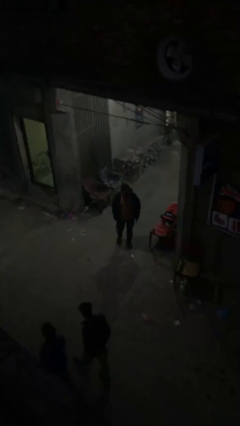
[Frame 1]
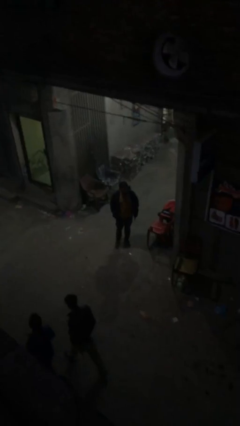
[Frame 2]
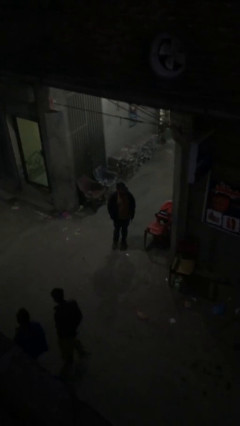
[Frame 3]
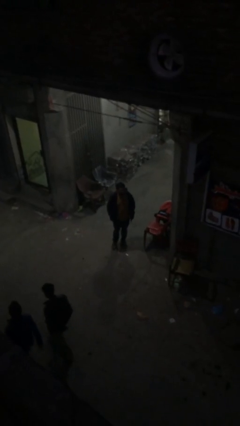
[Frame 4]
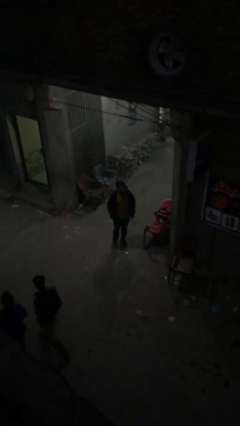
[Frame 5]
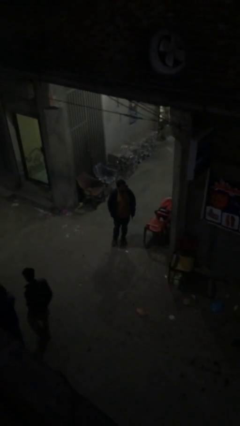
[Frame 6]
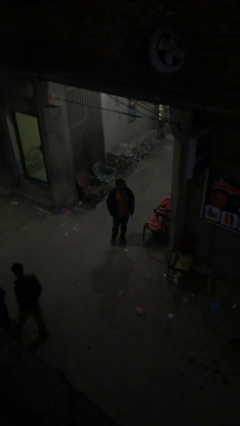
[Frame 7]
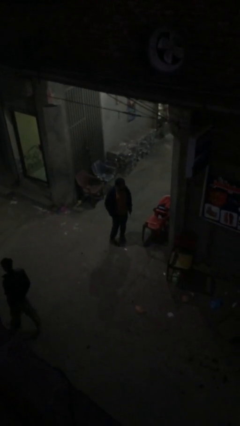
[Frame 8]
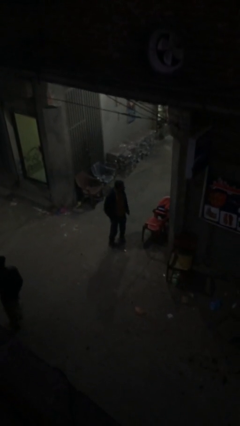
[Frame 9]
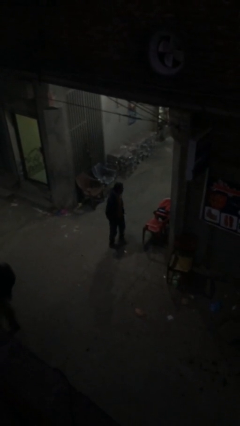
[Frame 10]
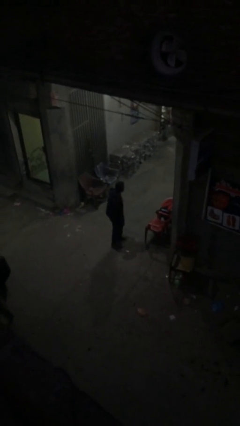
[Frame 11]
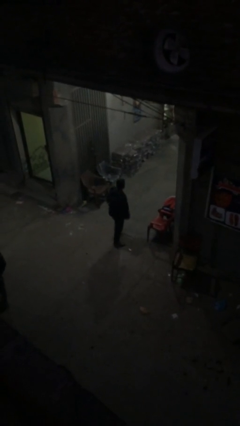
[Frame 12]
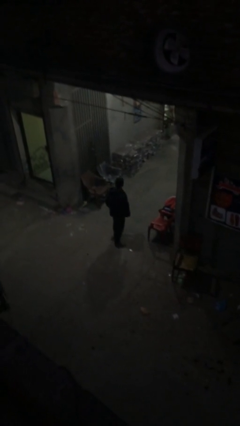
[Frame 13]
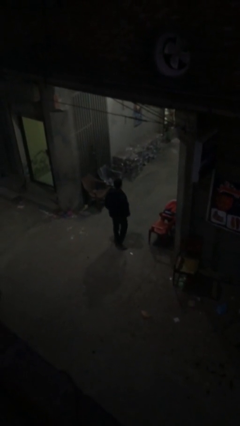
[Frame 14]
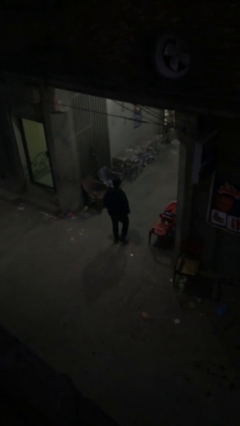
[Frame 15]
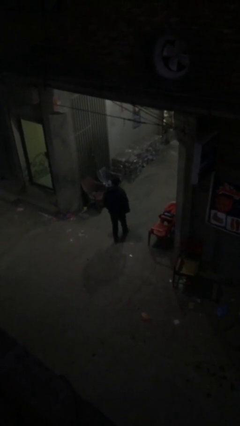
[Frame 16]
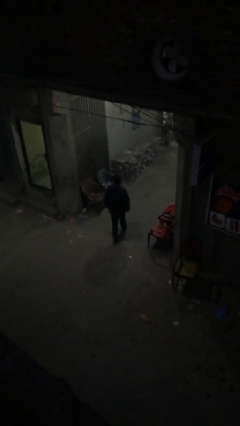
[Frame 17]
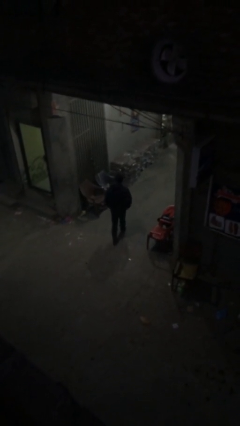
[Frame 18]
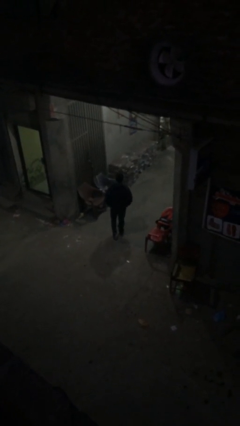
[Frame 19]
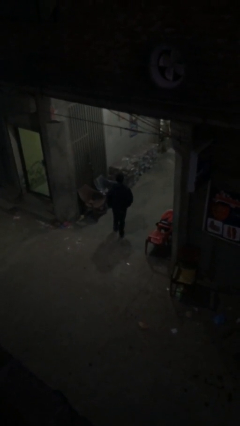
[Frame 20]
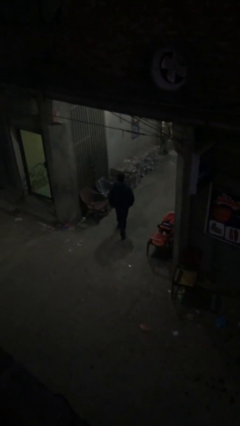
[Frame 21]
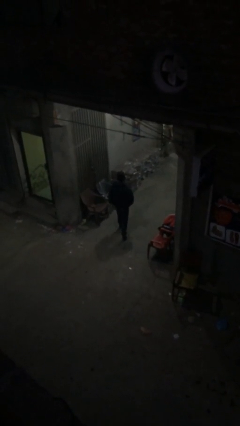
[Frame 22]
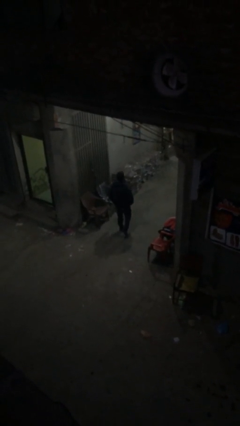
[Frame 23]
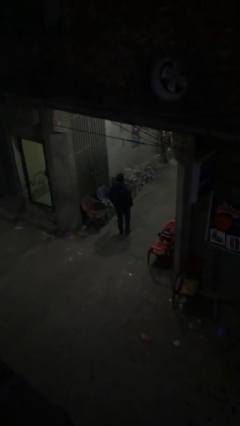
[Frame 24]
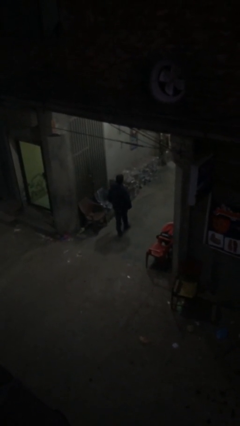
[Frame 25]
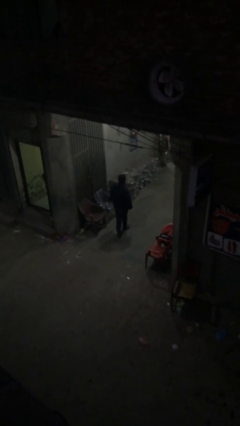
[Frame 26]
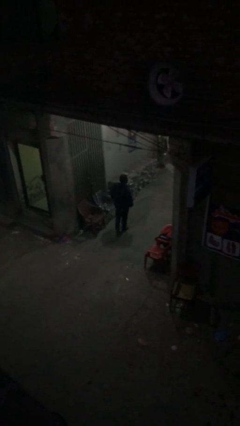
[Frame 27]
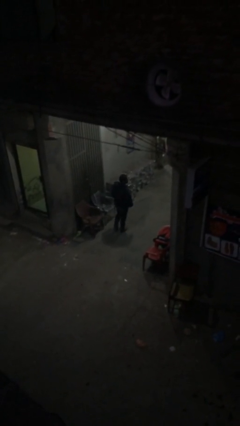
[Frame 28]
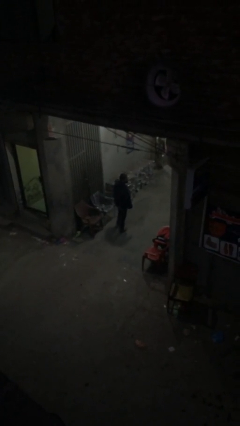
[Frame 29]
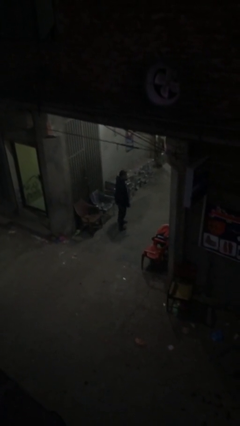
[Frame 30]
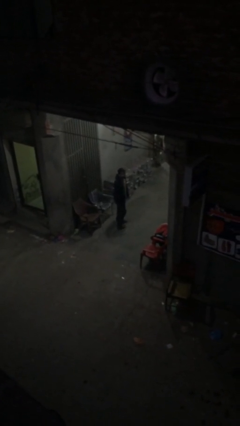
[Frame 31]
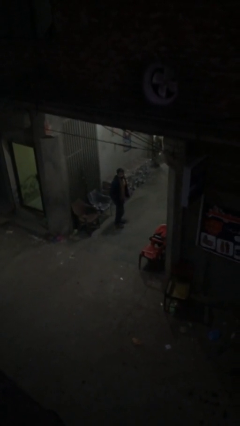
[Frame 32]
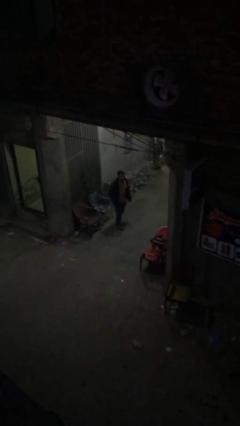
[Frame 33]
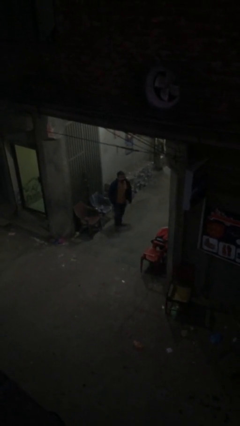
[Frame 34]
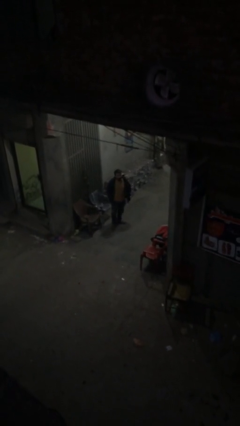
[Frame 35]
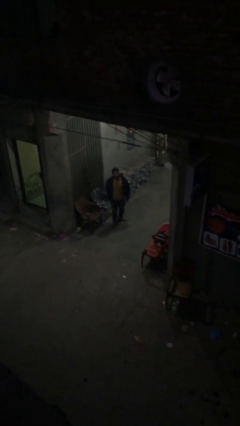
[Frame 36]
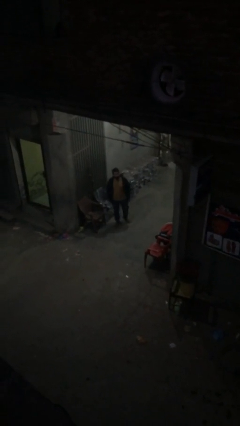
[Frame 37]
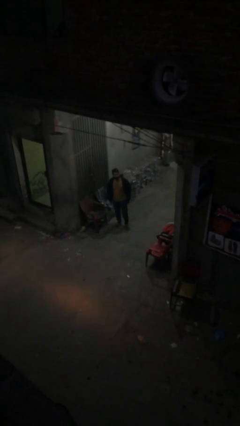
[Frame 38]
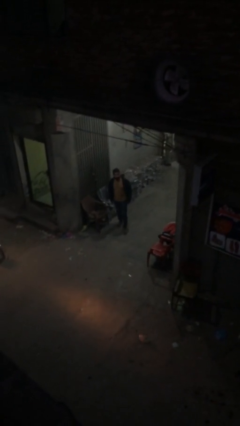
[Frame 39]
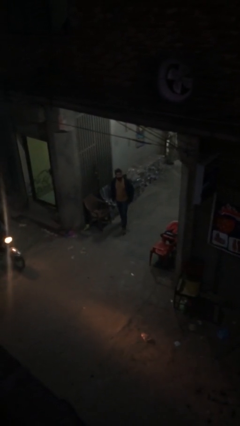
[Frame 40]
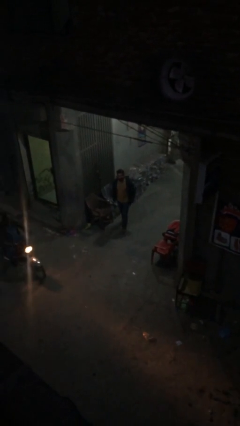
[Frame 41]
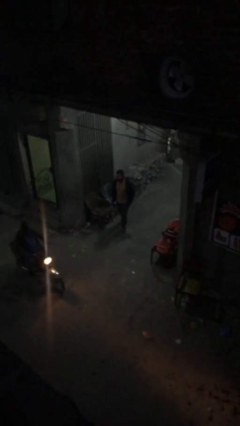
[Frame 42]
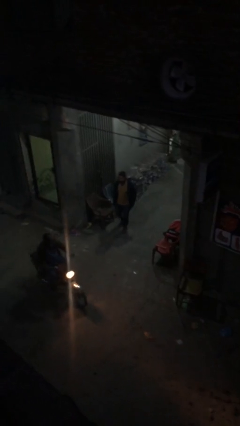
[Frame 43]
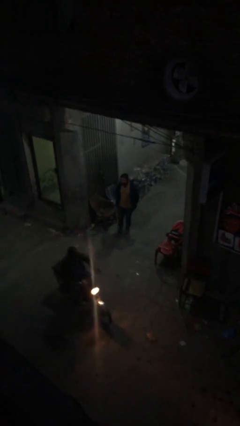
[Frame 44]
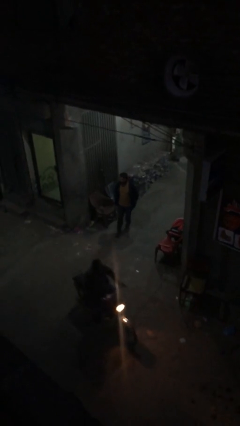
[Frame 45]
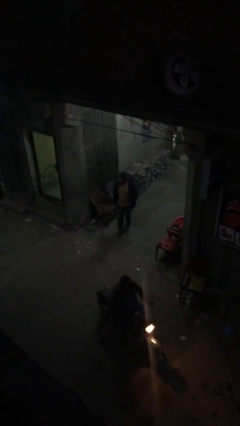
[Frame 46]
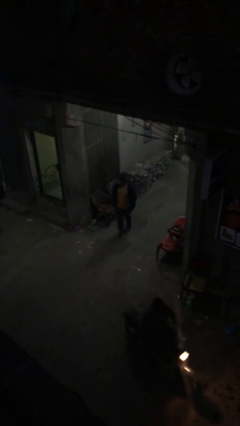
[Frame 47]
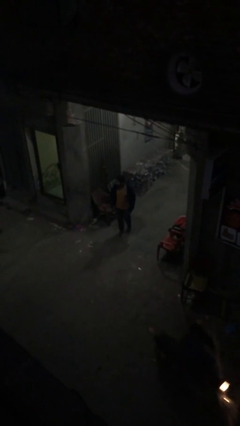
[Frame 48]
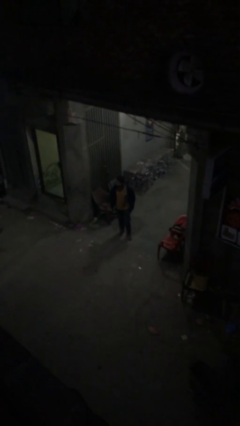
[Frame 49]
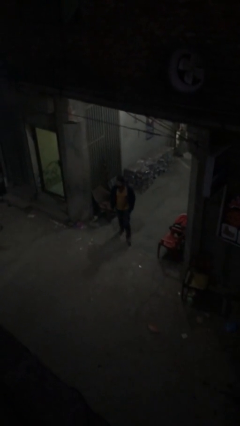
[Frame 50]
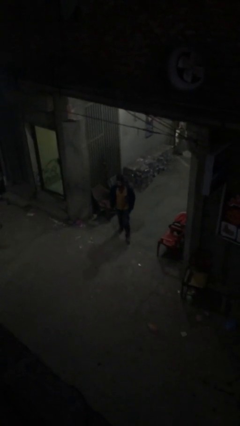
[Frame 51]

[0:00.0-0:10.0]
person walks

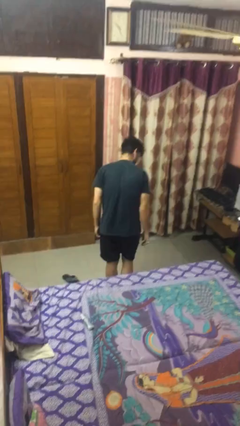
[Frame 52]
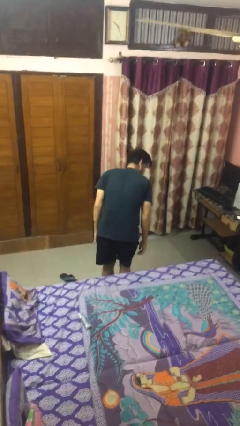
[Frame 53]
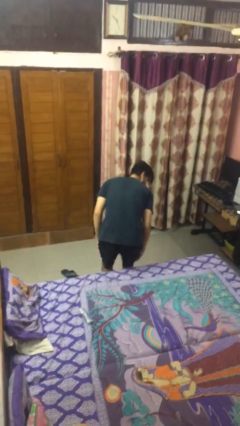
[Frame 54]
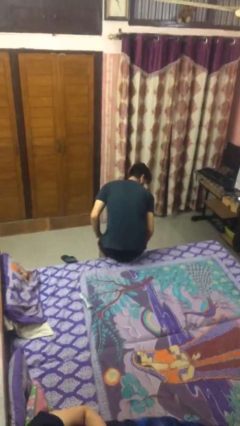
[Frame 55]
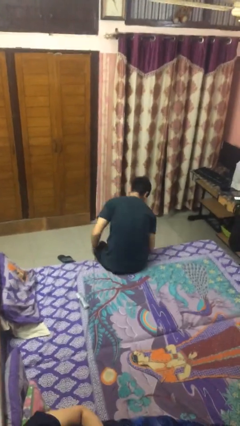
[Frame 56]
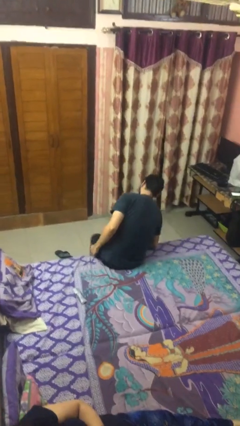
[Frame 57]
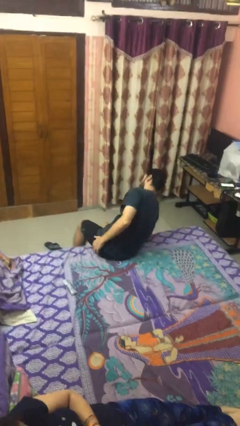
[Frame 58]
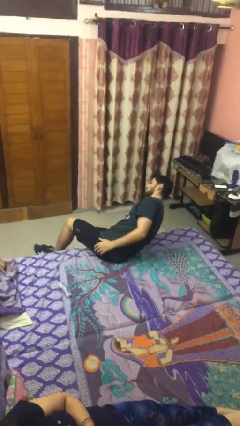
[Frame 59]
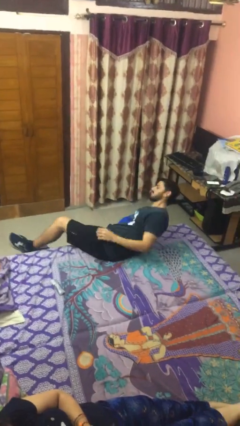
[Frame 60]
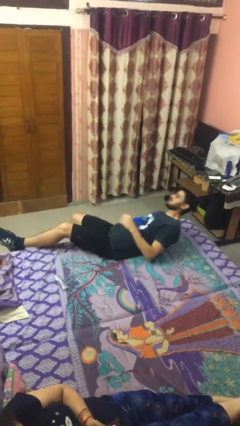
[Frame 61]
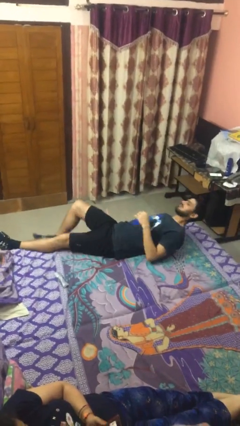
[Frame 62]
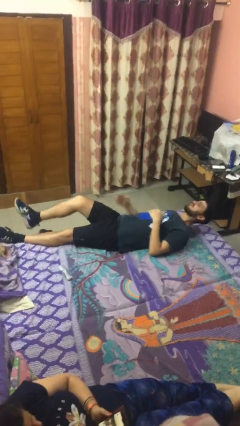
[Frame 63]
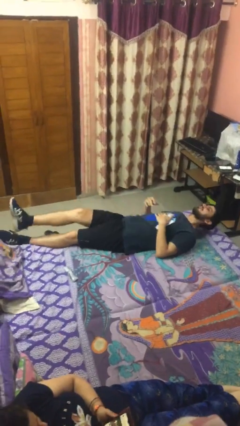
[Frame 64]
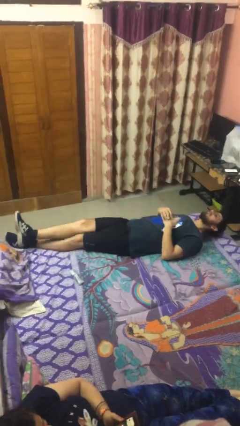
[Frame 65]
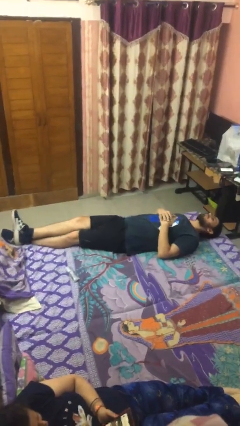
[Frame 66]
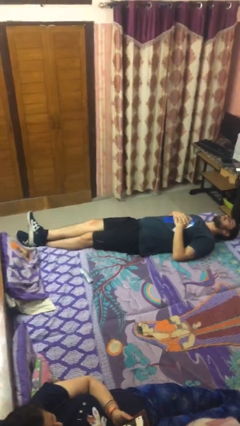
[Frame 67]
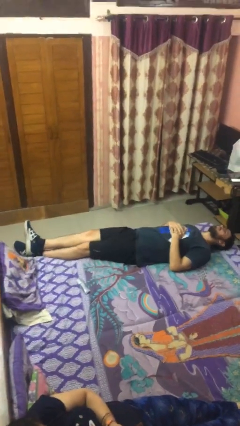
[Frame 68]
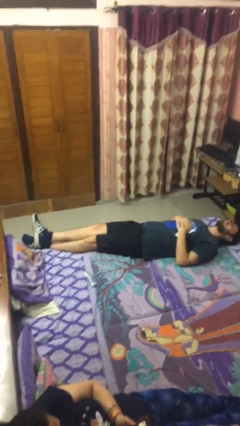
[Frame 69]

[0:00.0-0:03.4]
person lies down on bed

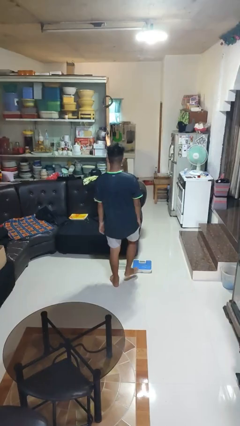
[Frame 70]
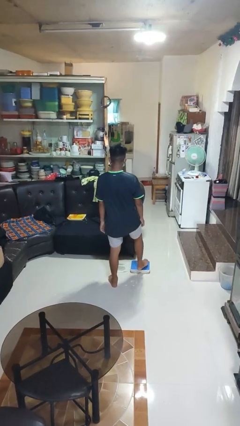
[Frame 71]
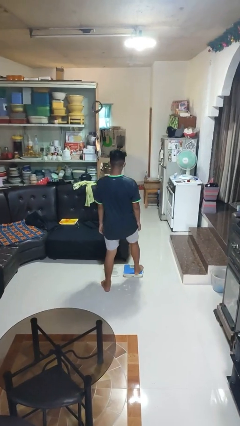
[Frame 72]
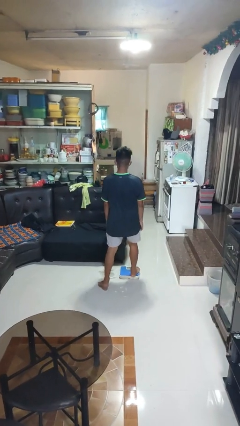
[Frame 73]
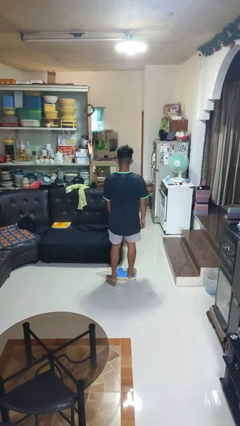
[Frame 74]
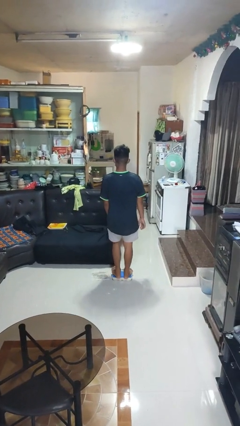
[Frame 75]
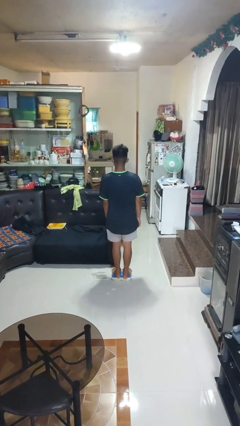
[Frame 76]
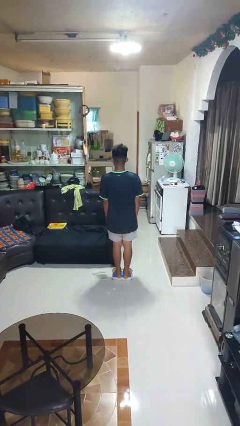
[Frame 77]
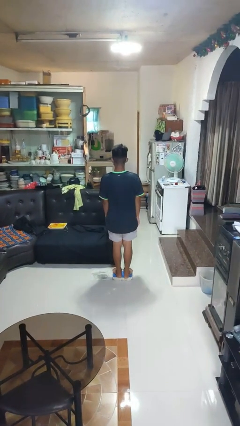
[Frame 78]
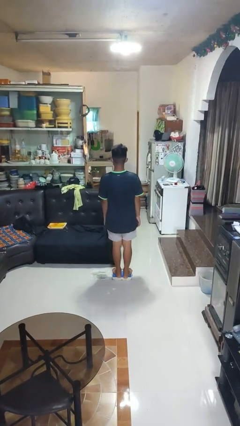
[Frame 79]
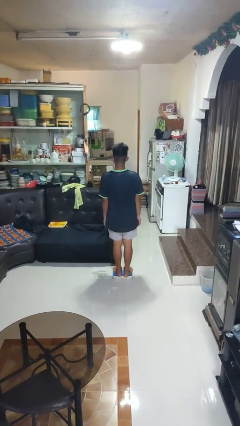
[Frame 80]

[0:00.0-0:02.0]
person uses bodyweight scale

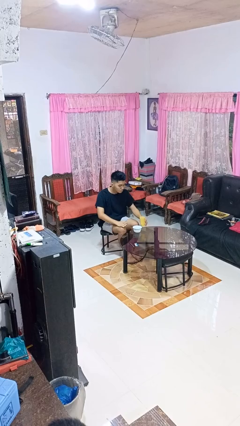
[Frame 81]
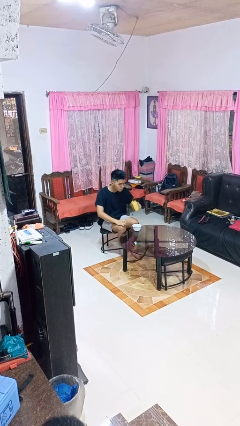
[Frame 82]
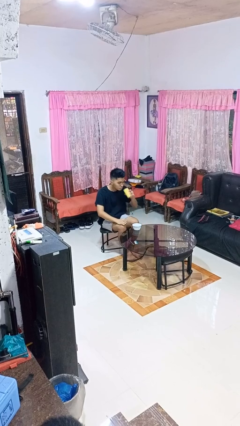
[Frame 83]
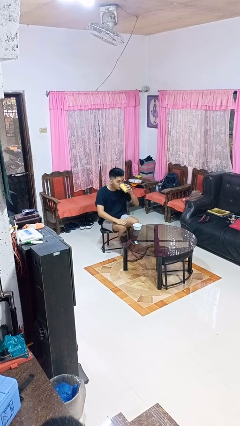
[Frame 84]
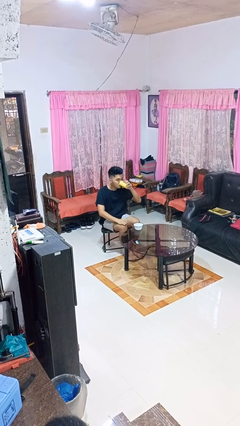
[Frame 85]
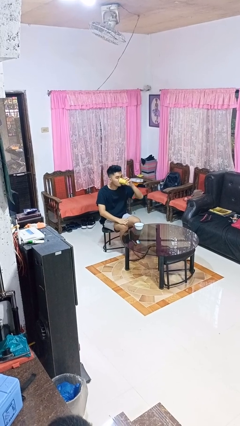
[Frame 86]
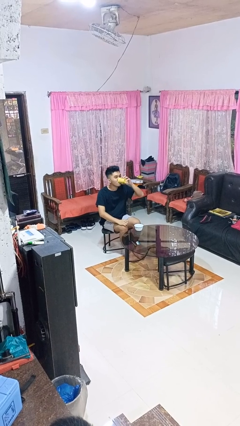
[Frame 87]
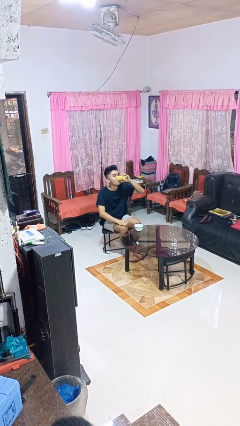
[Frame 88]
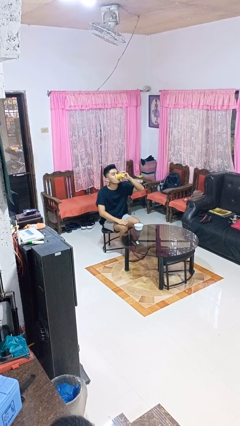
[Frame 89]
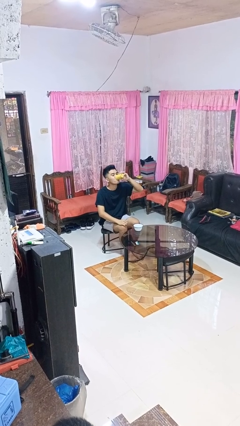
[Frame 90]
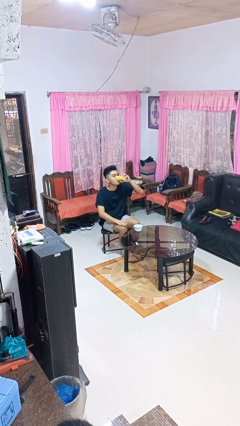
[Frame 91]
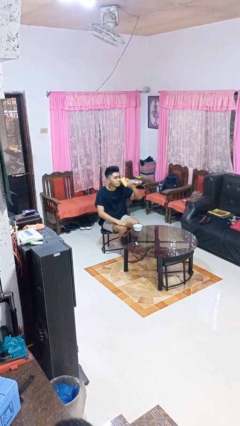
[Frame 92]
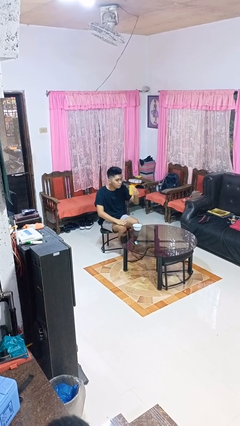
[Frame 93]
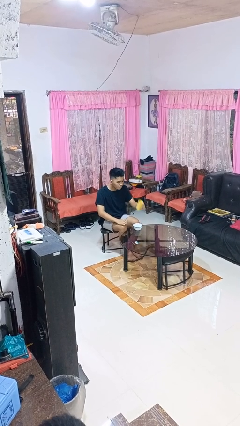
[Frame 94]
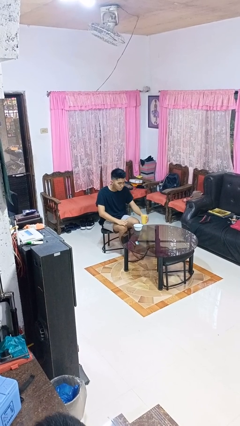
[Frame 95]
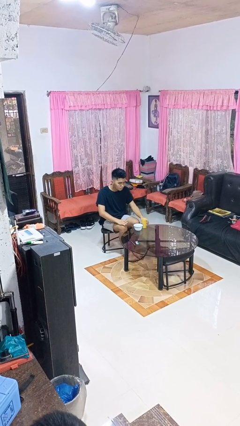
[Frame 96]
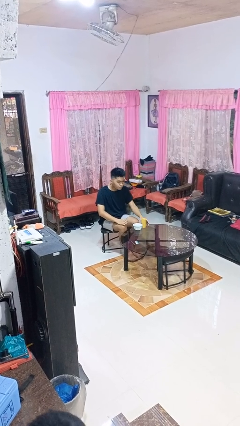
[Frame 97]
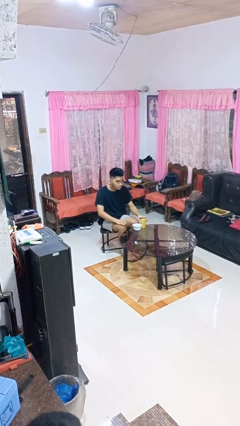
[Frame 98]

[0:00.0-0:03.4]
person drinks from cup
